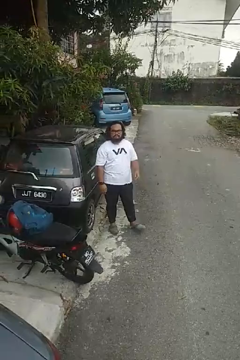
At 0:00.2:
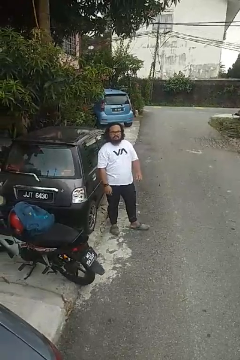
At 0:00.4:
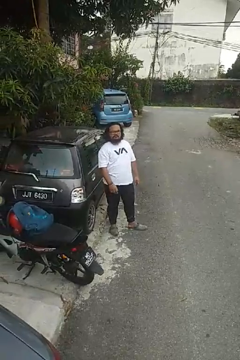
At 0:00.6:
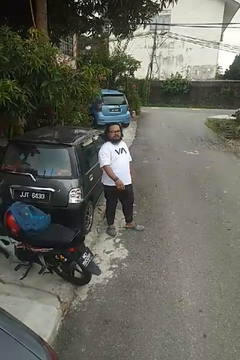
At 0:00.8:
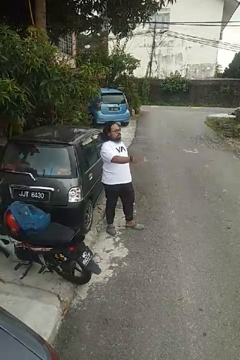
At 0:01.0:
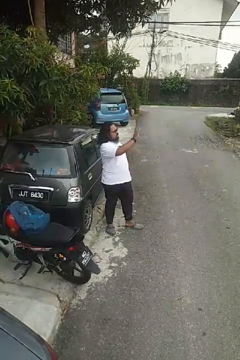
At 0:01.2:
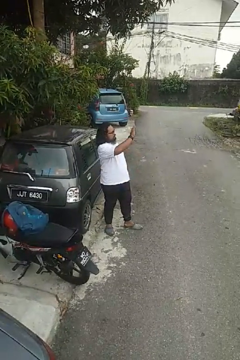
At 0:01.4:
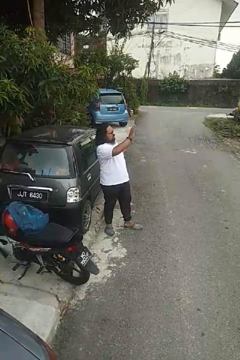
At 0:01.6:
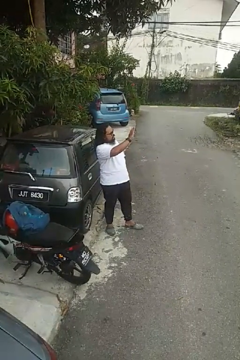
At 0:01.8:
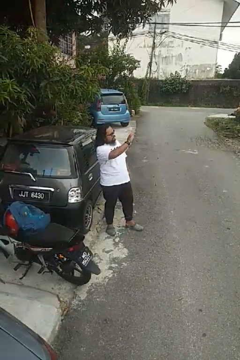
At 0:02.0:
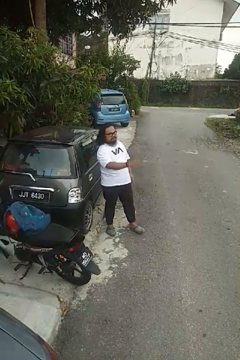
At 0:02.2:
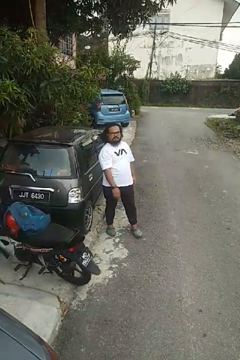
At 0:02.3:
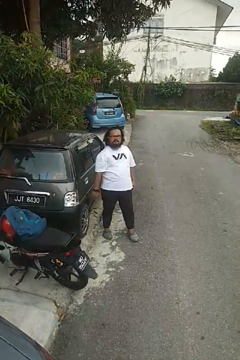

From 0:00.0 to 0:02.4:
person waves at person

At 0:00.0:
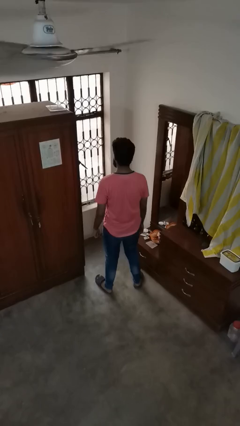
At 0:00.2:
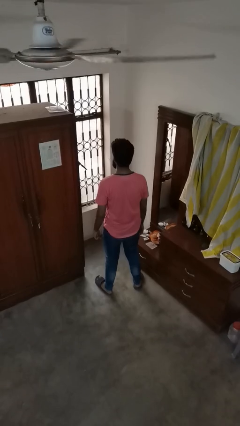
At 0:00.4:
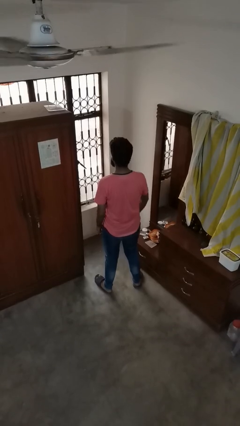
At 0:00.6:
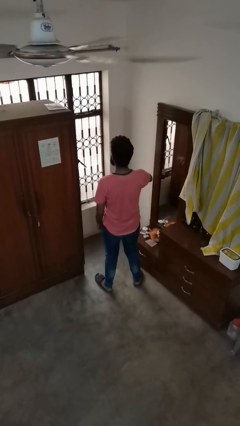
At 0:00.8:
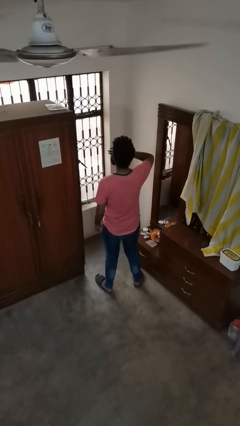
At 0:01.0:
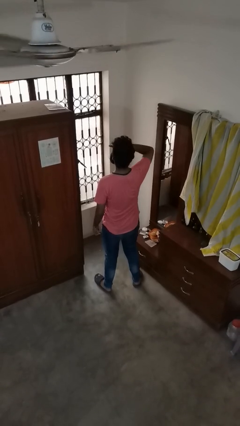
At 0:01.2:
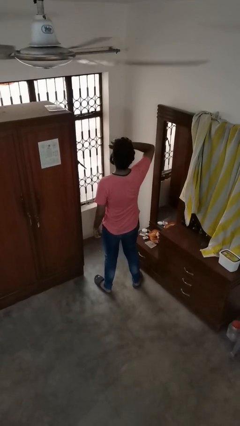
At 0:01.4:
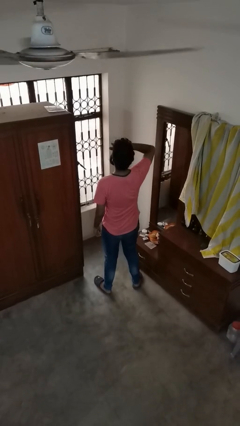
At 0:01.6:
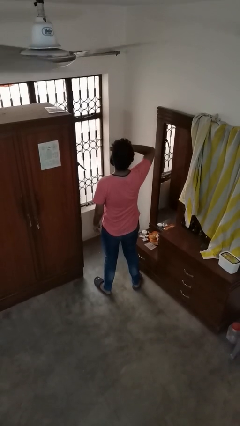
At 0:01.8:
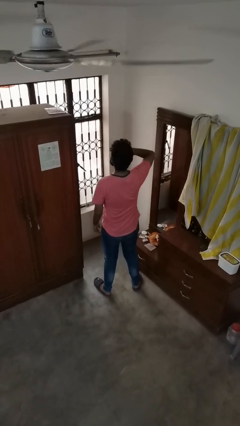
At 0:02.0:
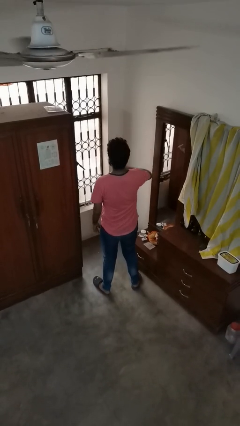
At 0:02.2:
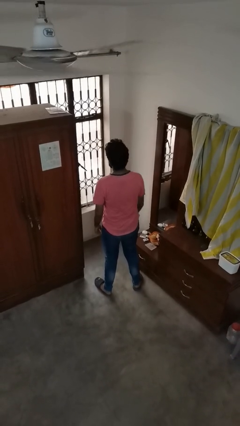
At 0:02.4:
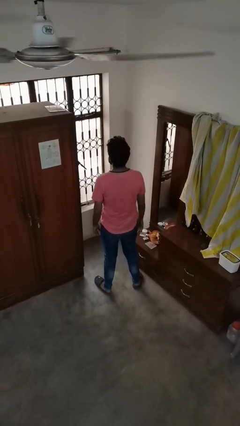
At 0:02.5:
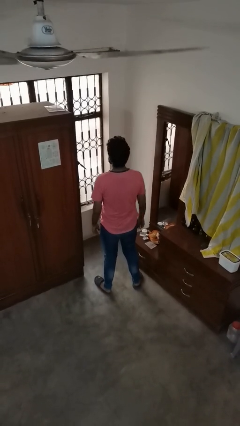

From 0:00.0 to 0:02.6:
person yawns

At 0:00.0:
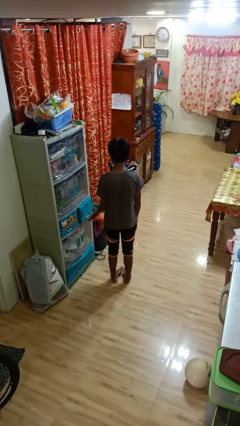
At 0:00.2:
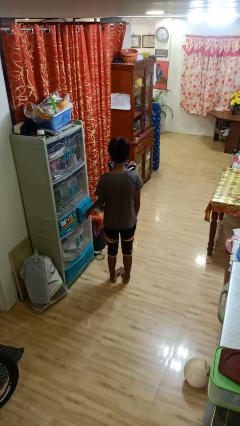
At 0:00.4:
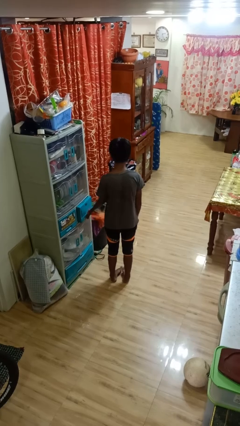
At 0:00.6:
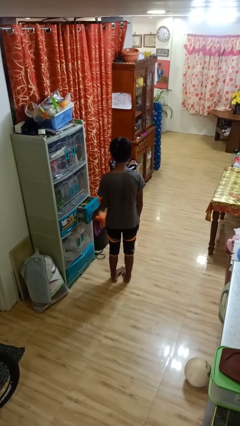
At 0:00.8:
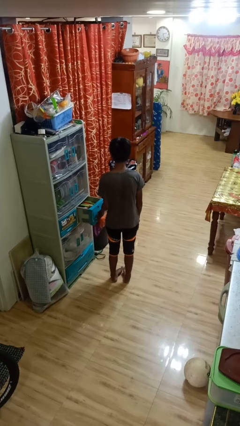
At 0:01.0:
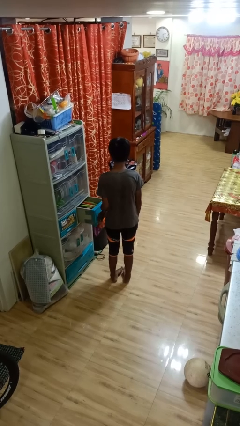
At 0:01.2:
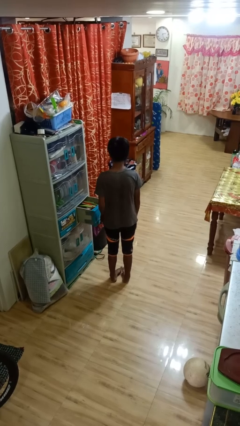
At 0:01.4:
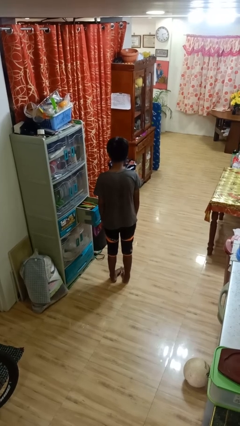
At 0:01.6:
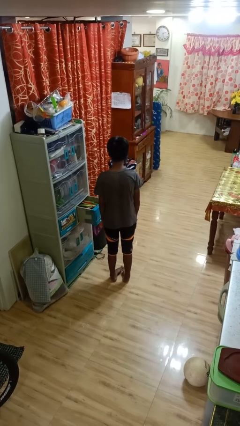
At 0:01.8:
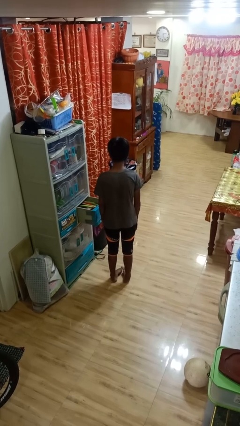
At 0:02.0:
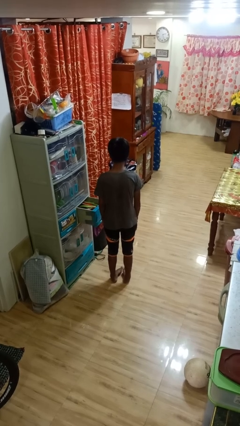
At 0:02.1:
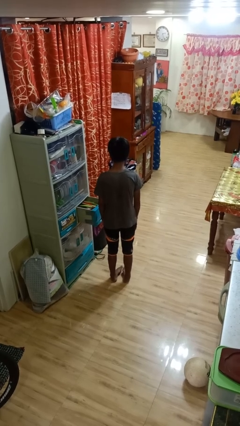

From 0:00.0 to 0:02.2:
person opens kitchen drawer

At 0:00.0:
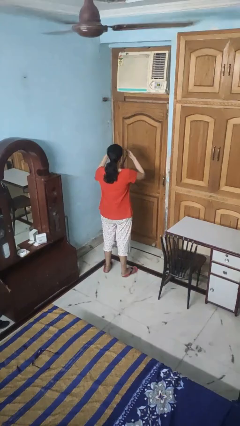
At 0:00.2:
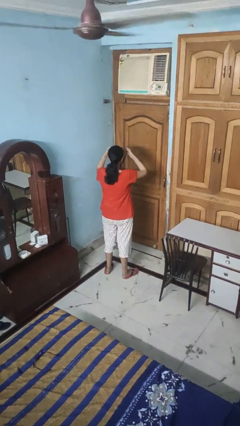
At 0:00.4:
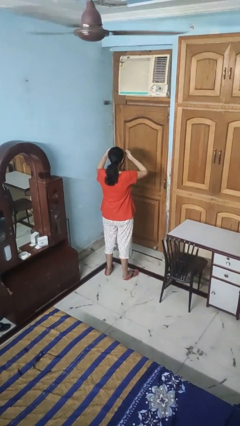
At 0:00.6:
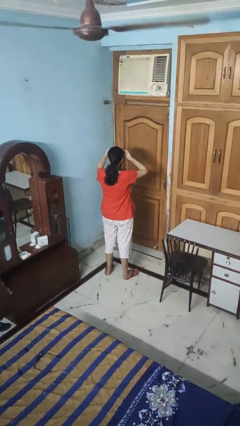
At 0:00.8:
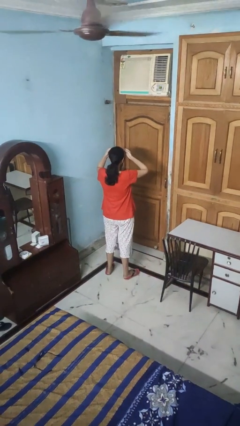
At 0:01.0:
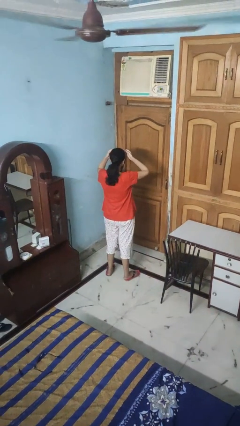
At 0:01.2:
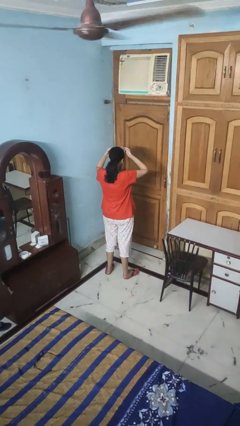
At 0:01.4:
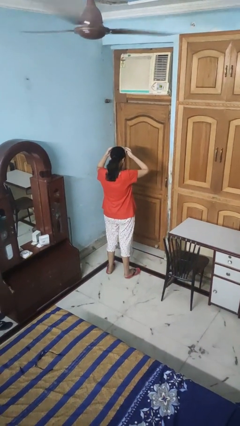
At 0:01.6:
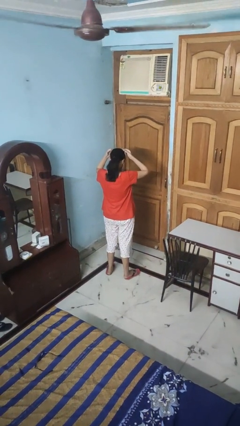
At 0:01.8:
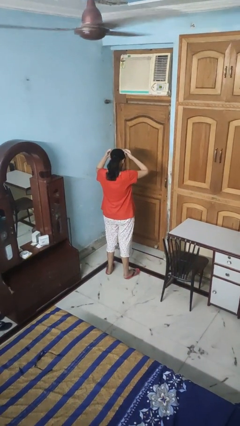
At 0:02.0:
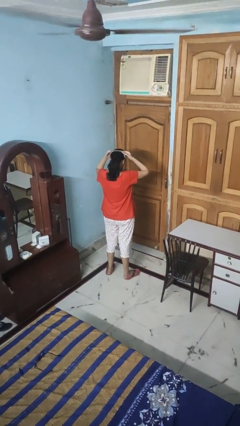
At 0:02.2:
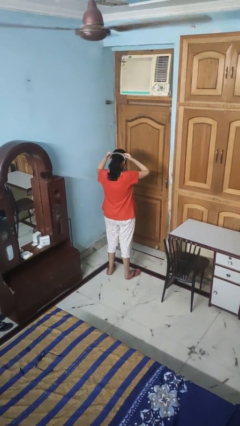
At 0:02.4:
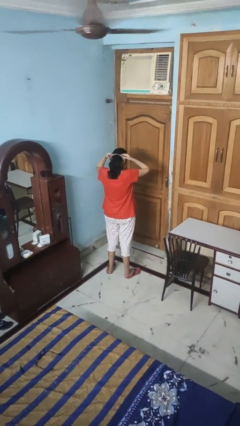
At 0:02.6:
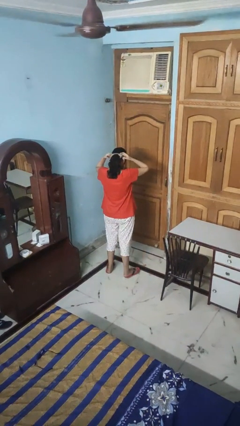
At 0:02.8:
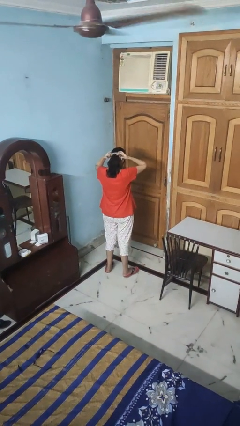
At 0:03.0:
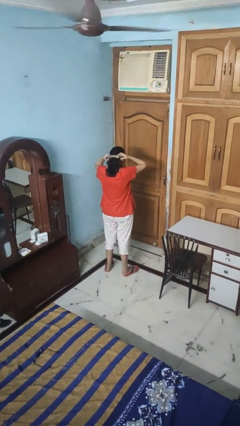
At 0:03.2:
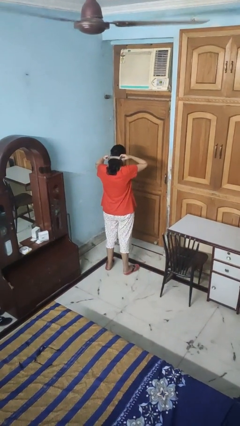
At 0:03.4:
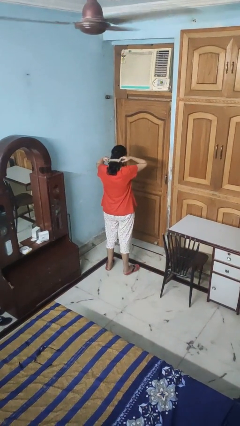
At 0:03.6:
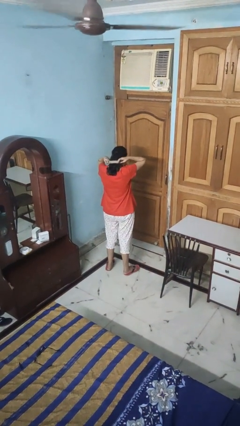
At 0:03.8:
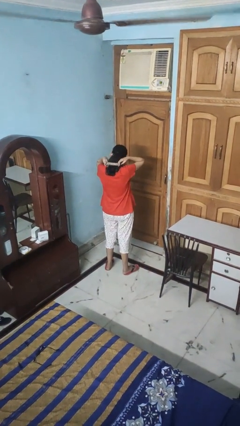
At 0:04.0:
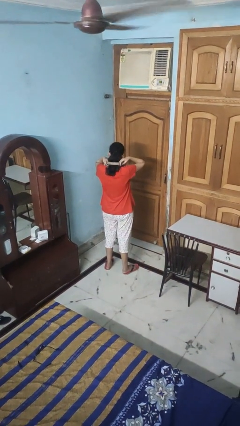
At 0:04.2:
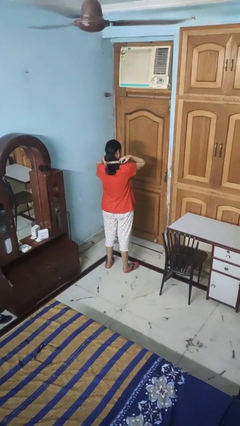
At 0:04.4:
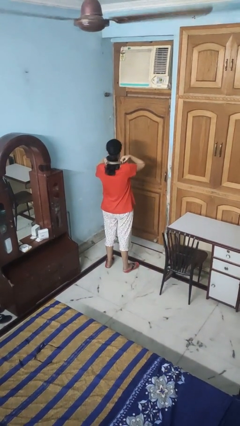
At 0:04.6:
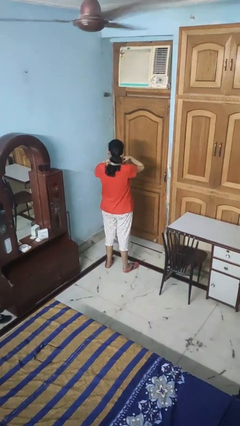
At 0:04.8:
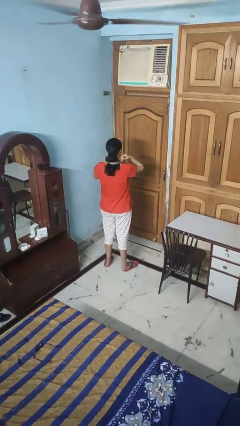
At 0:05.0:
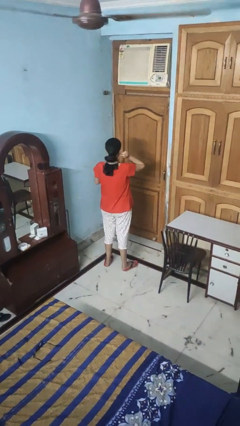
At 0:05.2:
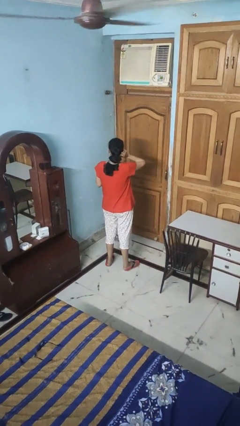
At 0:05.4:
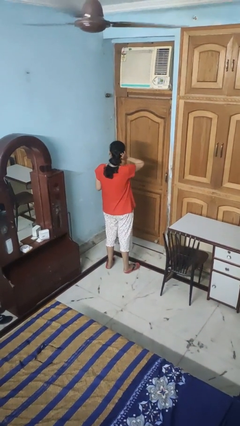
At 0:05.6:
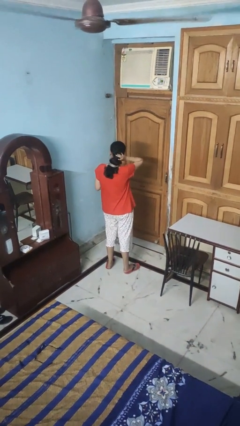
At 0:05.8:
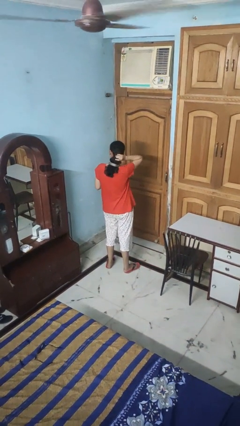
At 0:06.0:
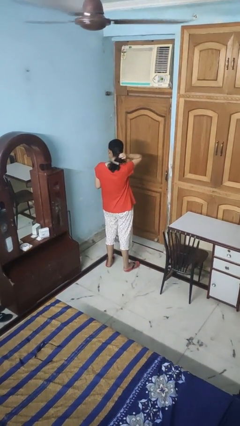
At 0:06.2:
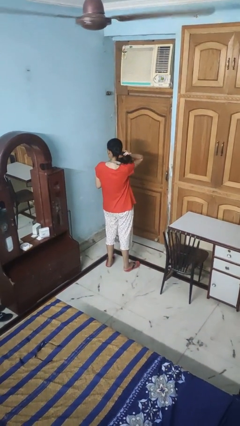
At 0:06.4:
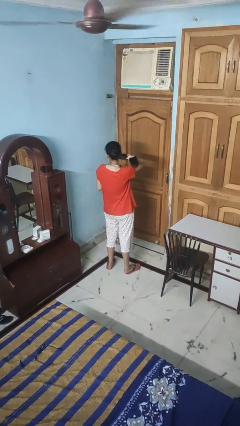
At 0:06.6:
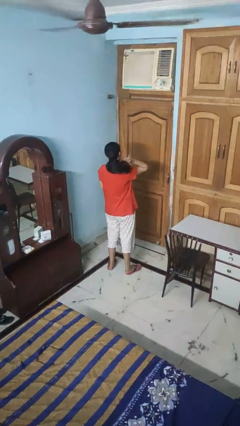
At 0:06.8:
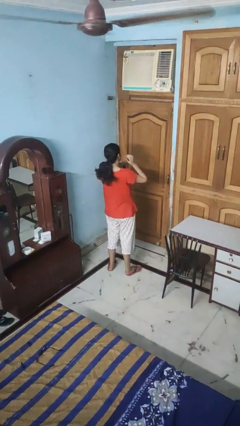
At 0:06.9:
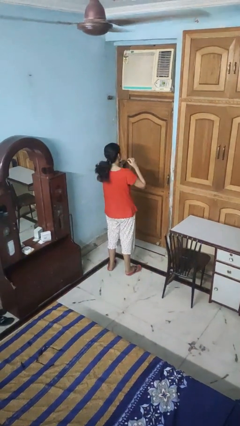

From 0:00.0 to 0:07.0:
person puts on necktie

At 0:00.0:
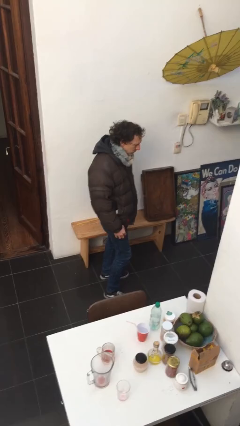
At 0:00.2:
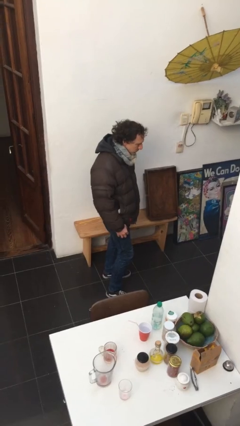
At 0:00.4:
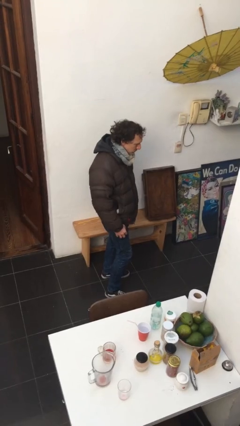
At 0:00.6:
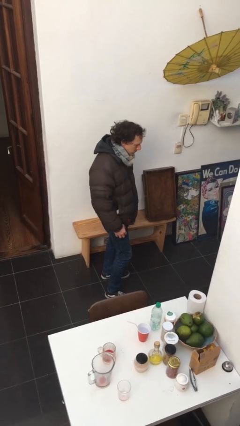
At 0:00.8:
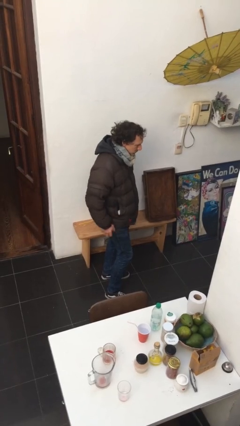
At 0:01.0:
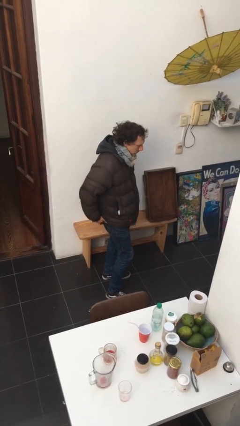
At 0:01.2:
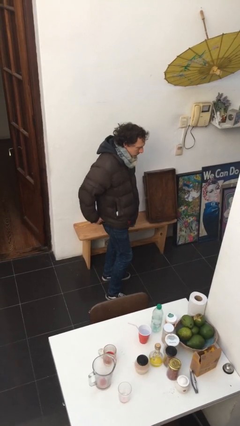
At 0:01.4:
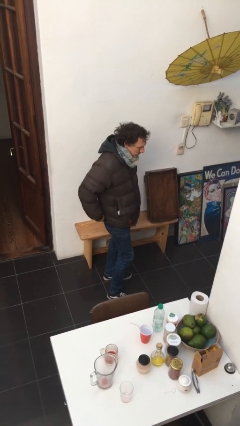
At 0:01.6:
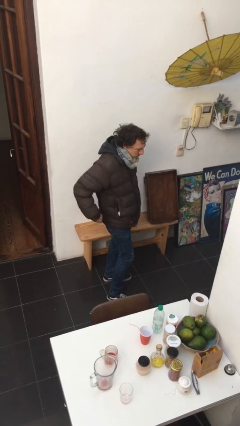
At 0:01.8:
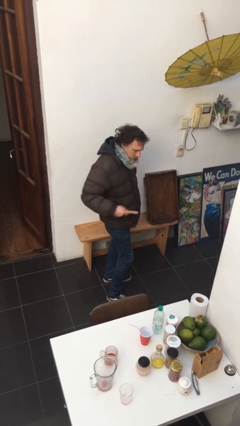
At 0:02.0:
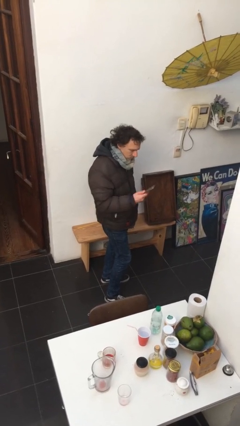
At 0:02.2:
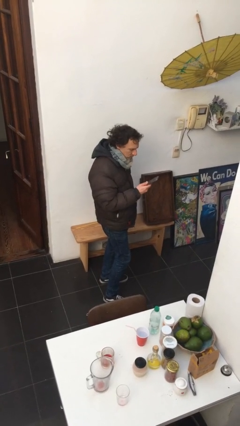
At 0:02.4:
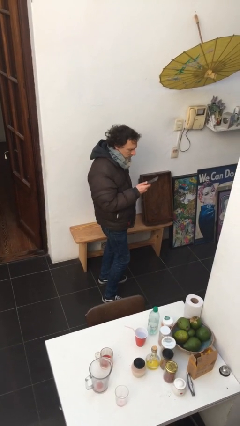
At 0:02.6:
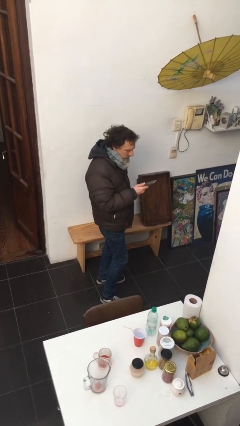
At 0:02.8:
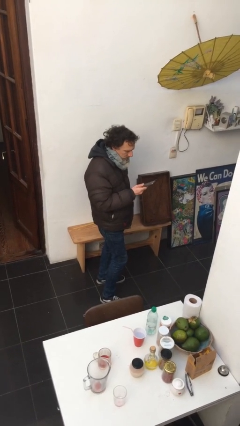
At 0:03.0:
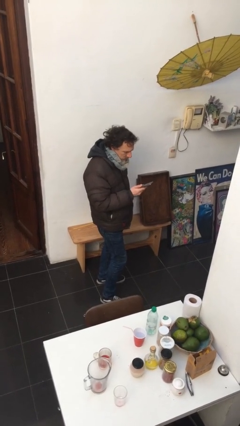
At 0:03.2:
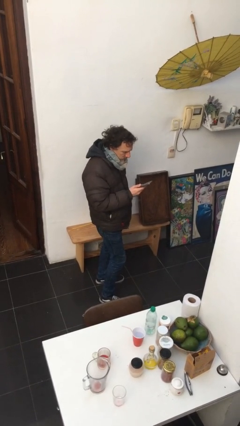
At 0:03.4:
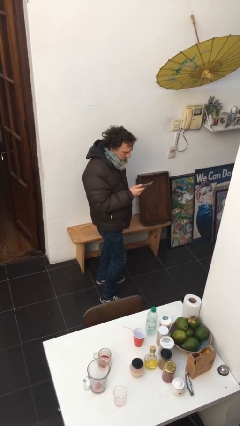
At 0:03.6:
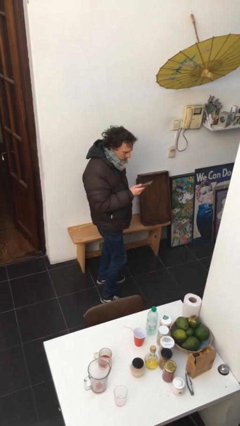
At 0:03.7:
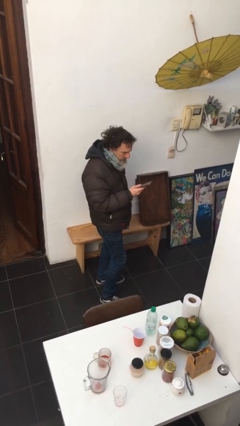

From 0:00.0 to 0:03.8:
person takes phone from pocket
